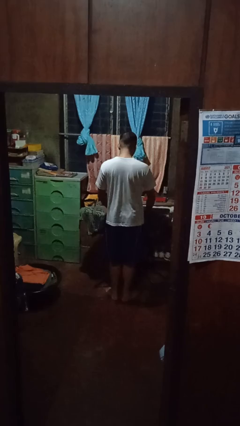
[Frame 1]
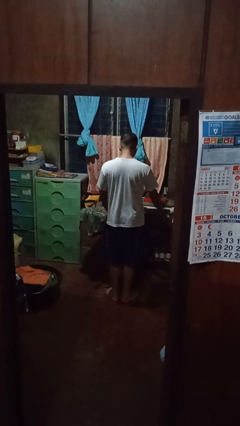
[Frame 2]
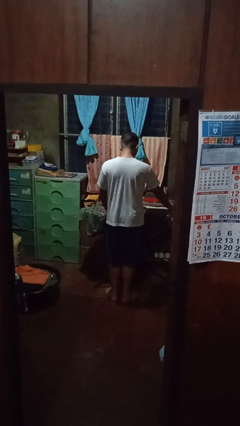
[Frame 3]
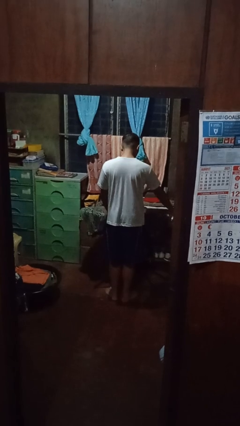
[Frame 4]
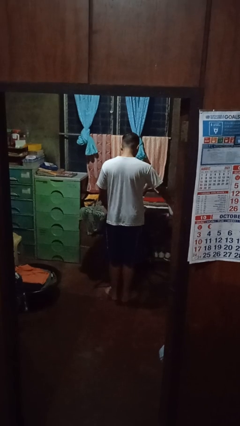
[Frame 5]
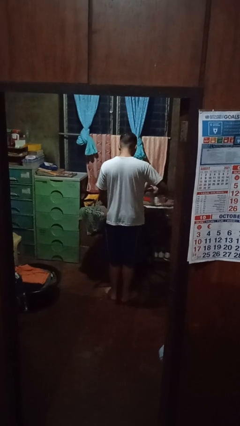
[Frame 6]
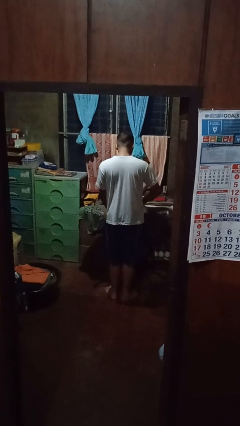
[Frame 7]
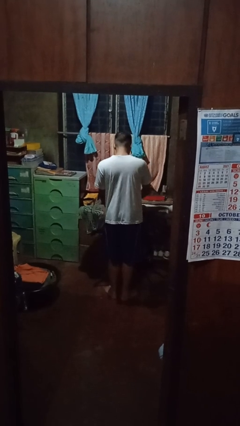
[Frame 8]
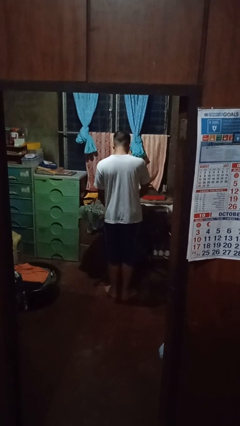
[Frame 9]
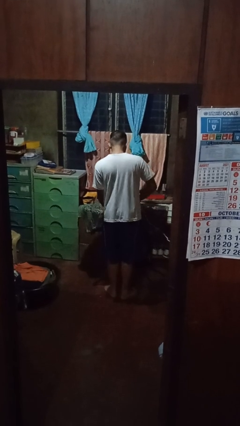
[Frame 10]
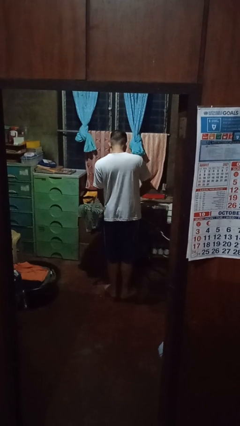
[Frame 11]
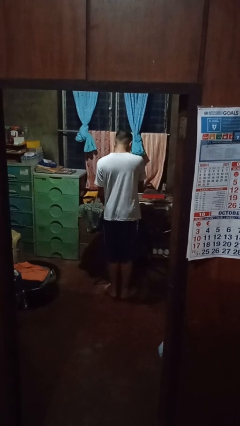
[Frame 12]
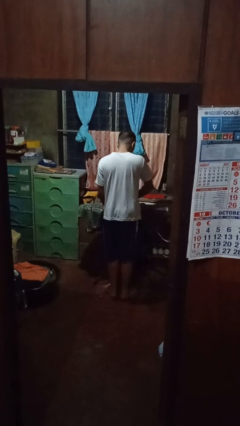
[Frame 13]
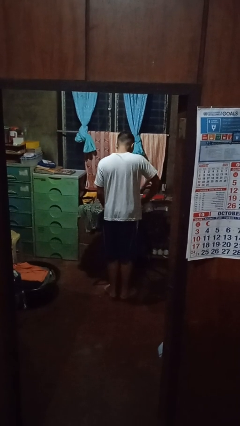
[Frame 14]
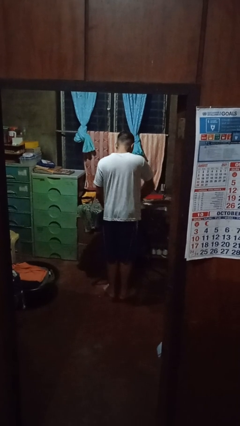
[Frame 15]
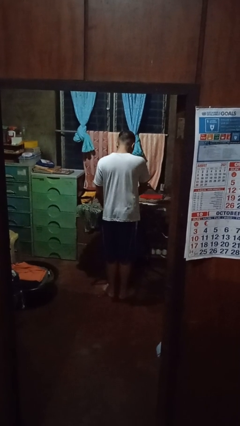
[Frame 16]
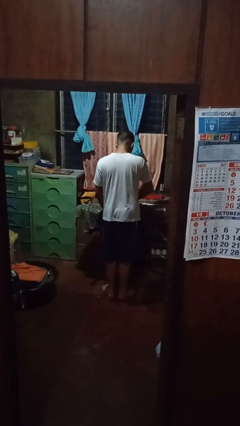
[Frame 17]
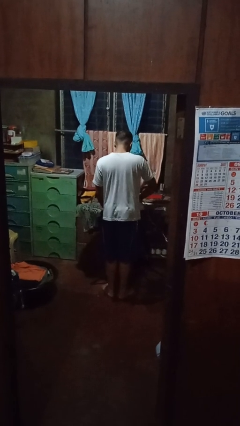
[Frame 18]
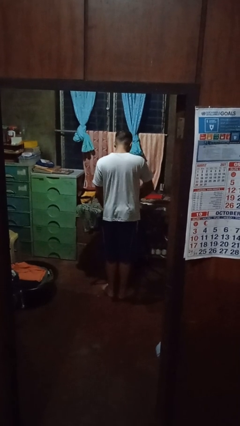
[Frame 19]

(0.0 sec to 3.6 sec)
person irons clothes

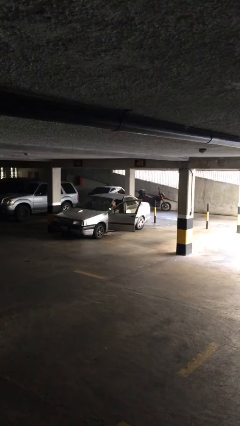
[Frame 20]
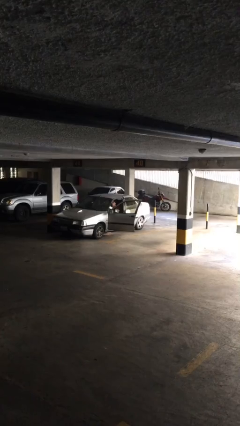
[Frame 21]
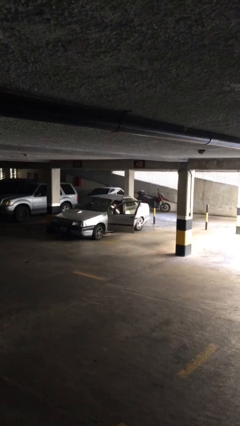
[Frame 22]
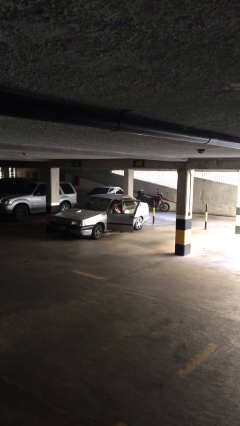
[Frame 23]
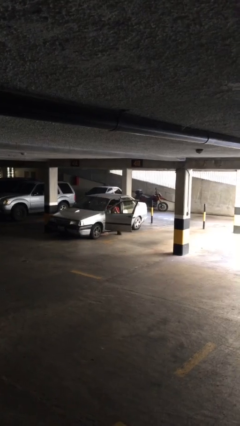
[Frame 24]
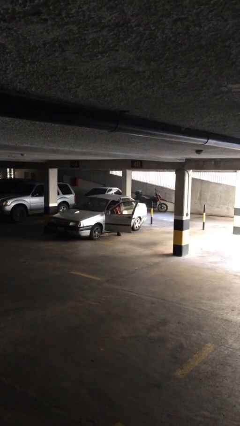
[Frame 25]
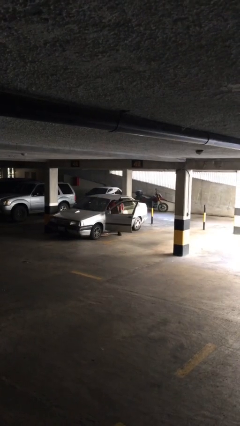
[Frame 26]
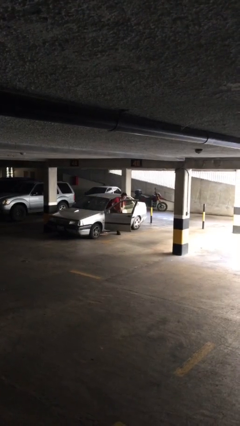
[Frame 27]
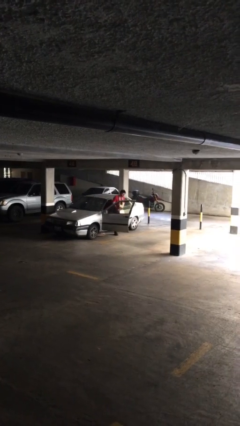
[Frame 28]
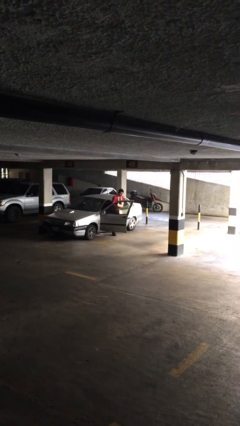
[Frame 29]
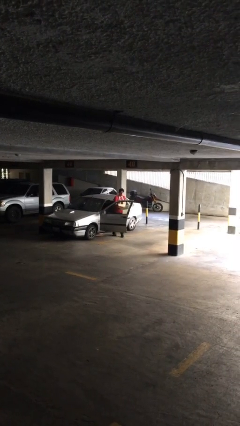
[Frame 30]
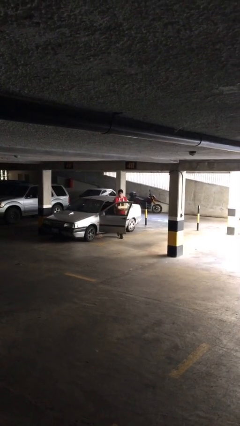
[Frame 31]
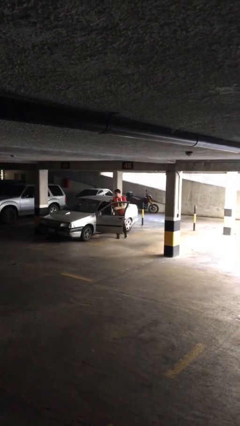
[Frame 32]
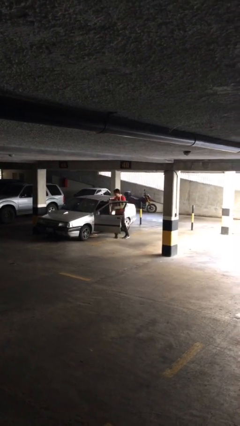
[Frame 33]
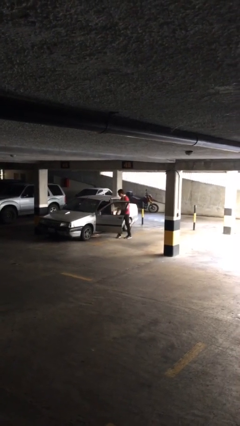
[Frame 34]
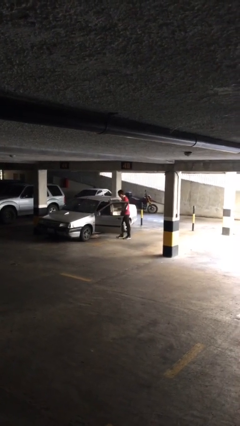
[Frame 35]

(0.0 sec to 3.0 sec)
person exits car

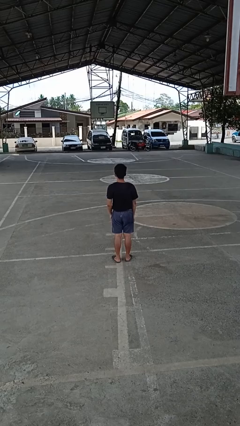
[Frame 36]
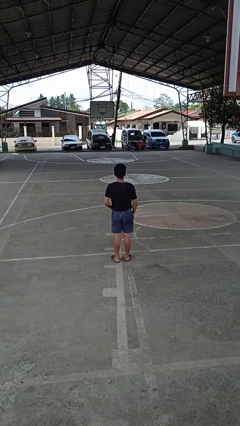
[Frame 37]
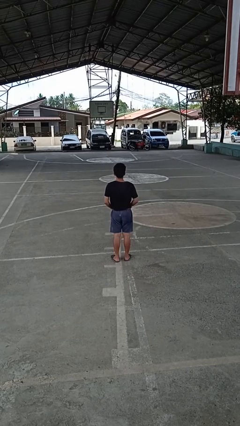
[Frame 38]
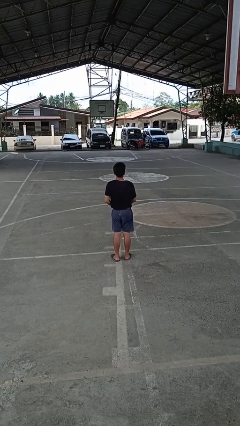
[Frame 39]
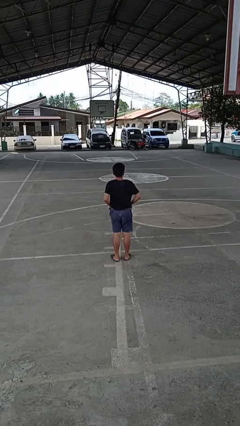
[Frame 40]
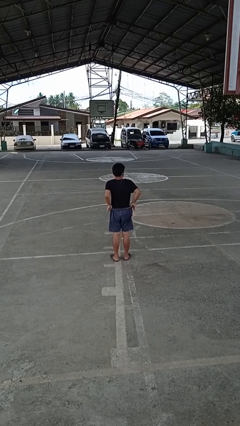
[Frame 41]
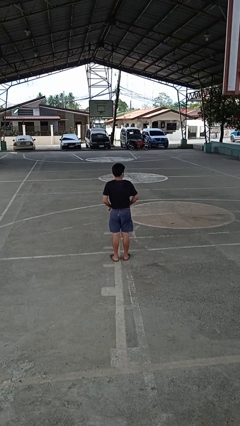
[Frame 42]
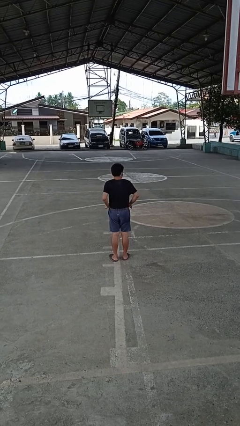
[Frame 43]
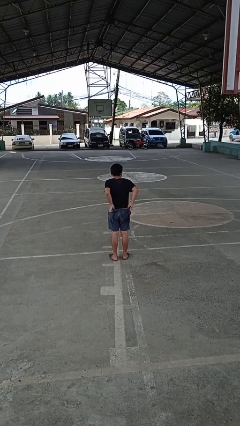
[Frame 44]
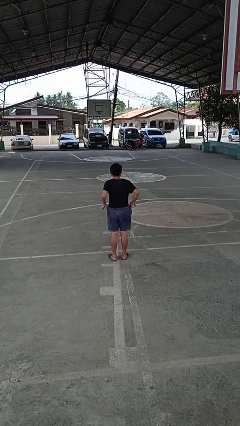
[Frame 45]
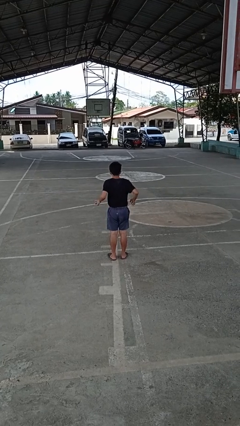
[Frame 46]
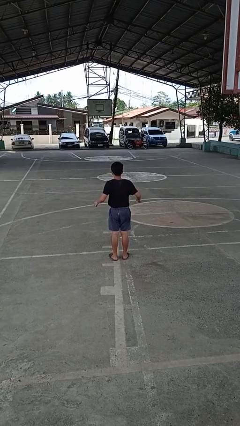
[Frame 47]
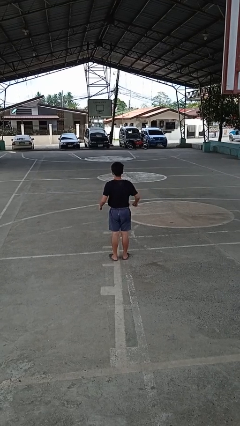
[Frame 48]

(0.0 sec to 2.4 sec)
person hikes up pants

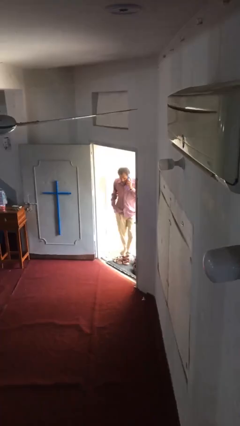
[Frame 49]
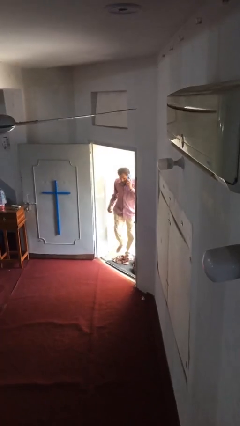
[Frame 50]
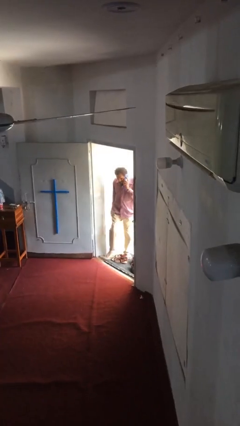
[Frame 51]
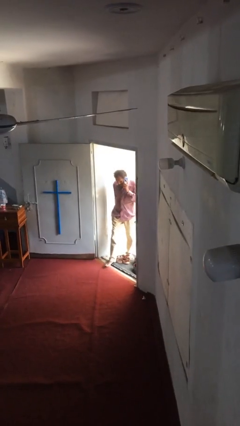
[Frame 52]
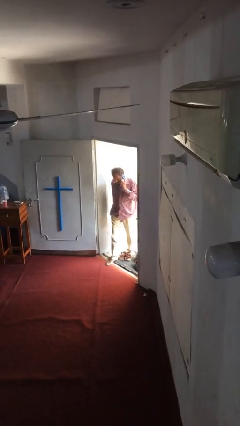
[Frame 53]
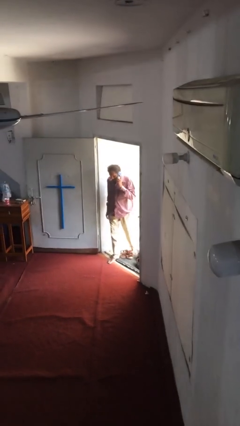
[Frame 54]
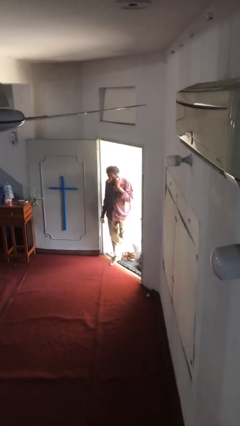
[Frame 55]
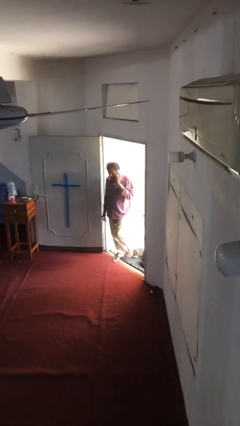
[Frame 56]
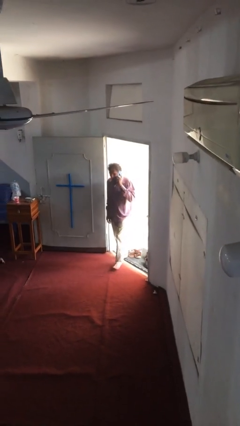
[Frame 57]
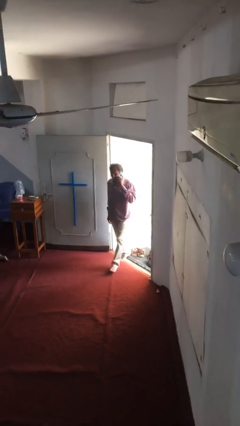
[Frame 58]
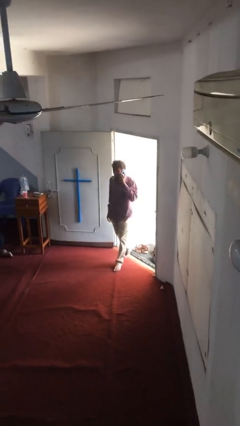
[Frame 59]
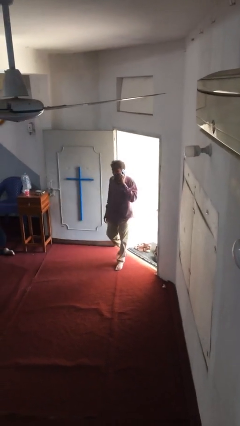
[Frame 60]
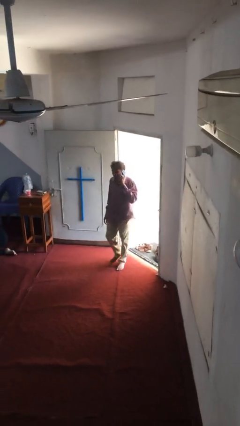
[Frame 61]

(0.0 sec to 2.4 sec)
person enters scene through structure

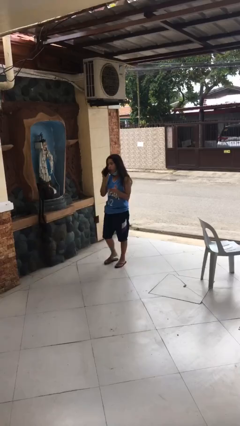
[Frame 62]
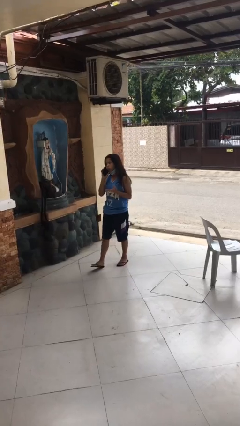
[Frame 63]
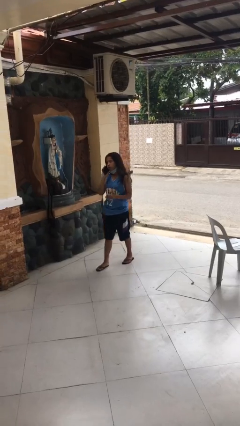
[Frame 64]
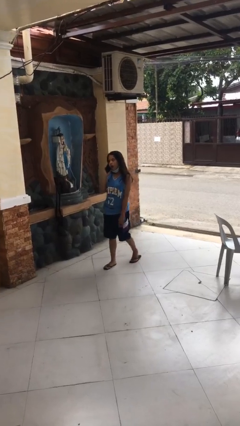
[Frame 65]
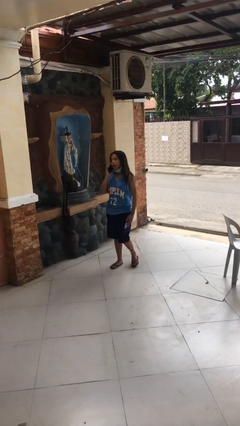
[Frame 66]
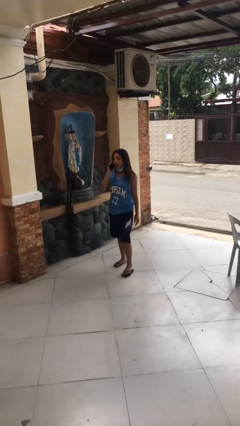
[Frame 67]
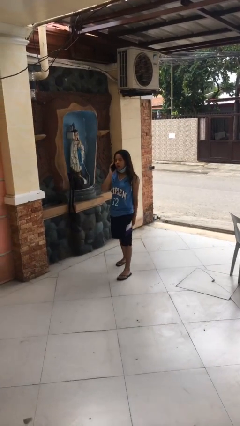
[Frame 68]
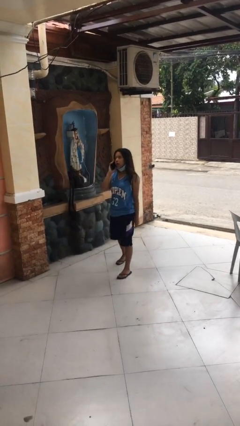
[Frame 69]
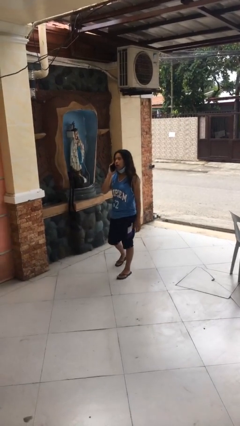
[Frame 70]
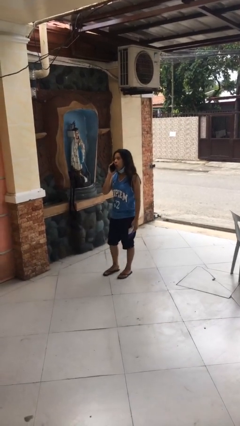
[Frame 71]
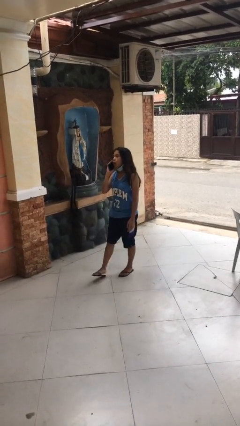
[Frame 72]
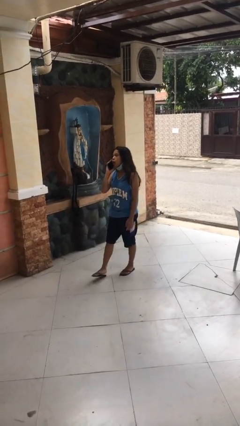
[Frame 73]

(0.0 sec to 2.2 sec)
person talks on phone

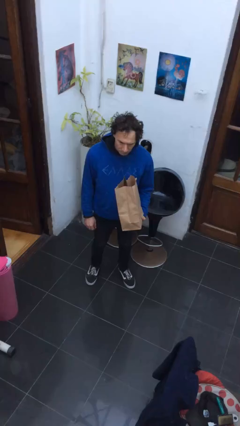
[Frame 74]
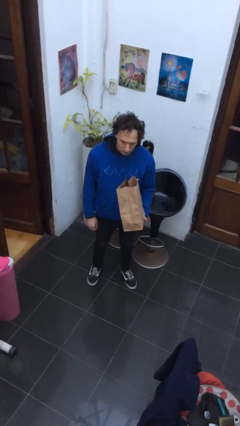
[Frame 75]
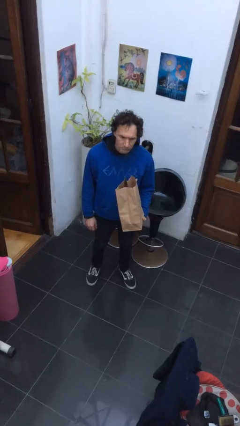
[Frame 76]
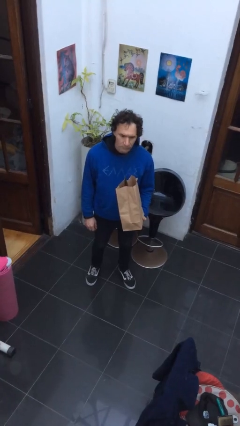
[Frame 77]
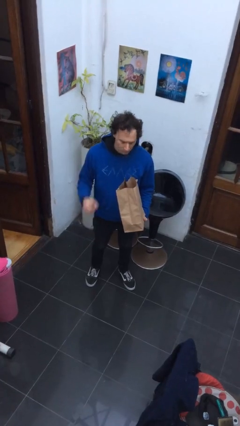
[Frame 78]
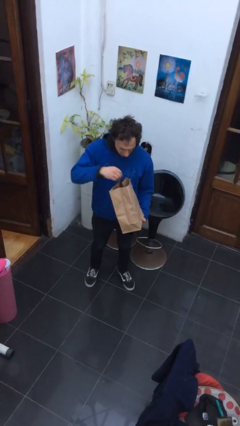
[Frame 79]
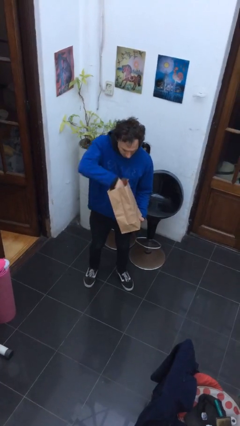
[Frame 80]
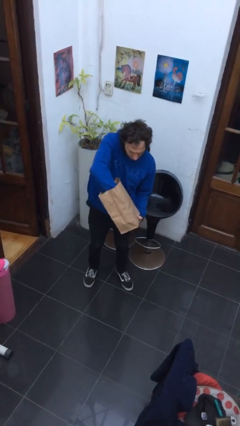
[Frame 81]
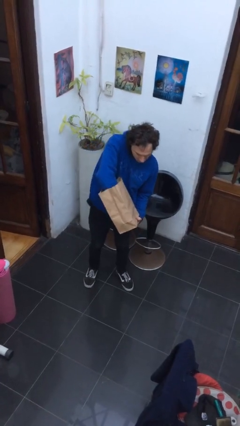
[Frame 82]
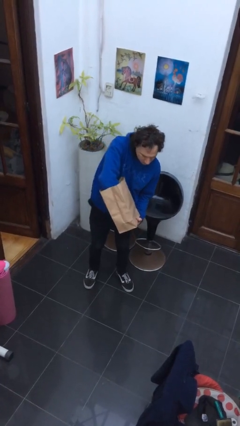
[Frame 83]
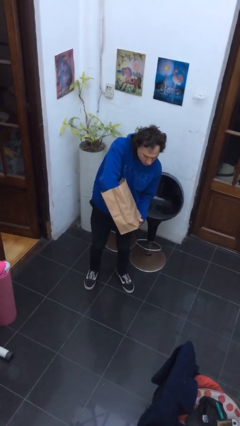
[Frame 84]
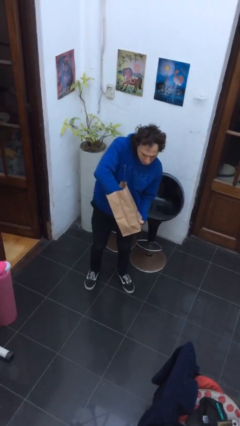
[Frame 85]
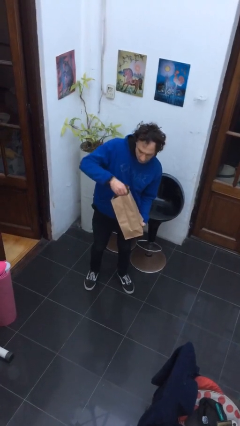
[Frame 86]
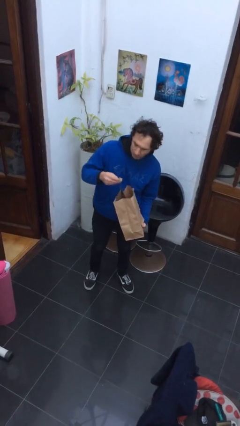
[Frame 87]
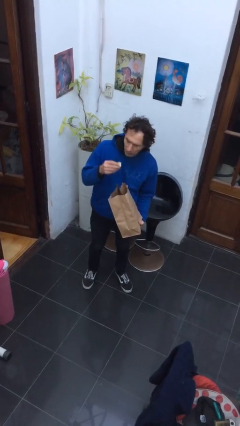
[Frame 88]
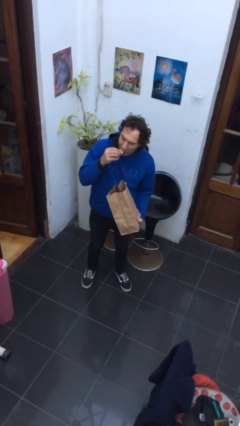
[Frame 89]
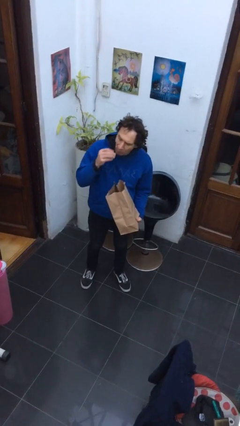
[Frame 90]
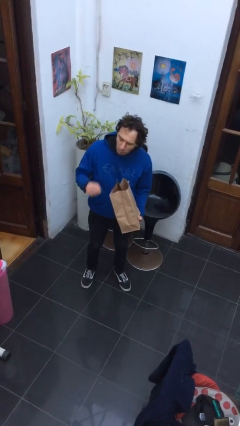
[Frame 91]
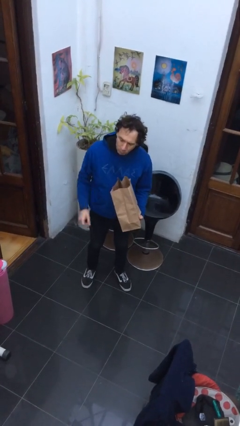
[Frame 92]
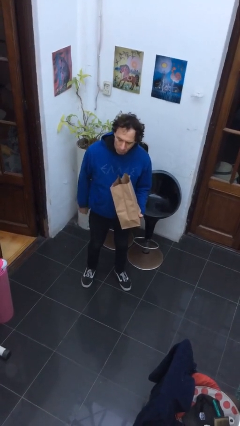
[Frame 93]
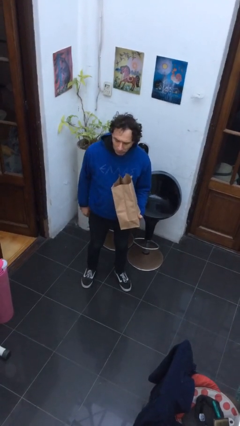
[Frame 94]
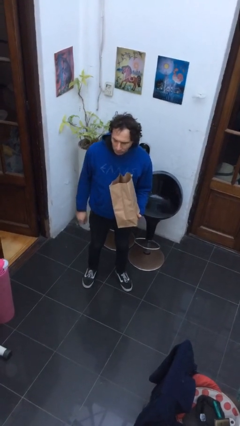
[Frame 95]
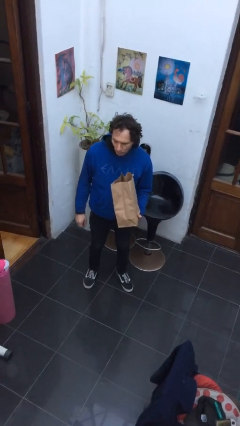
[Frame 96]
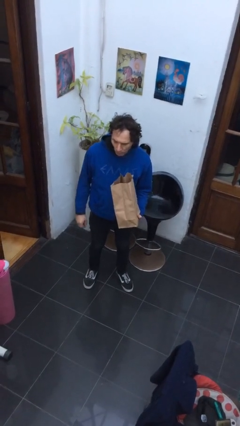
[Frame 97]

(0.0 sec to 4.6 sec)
person eats snack from bag
